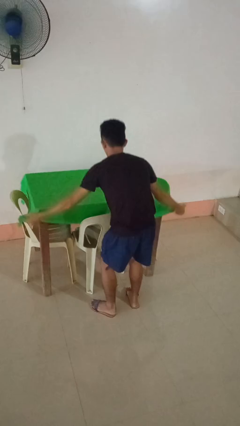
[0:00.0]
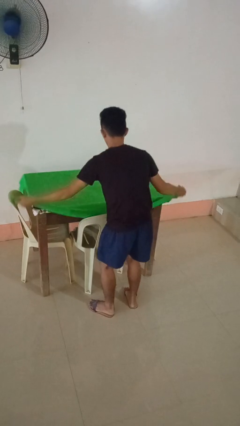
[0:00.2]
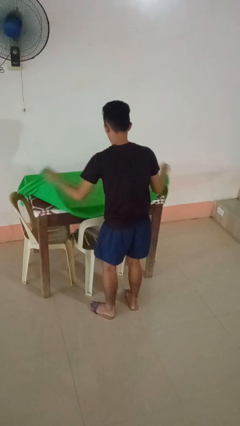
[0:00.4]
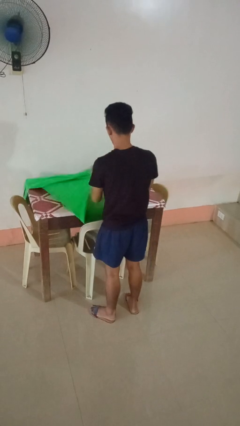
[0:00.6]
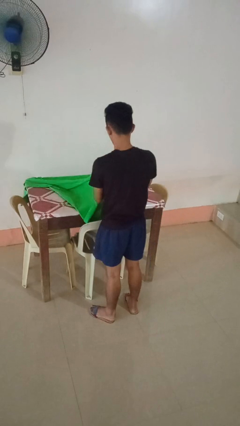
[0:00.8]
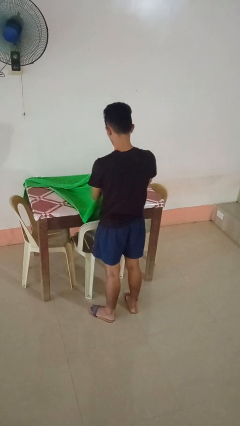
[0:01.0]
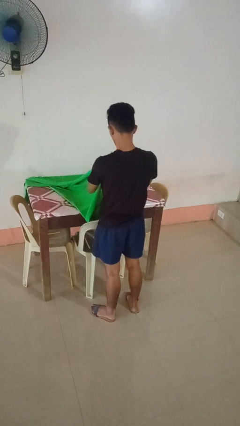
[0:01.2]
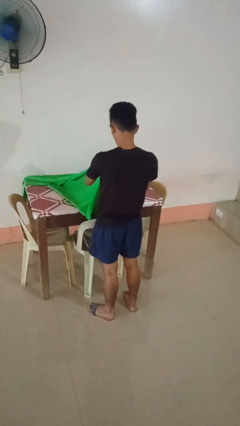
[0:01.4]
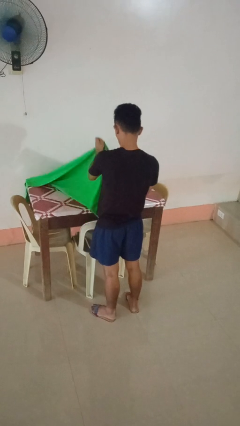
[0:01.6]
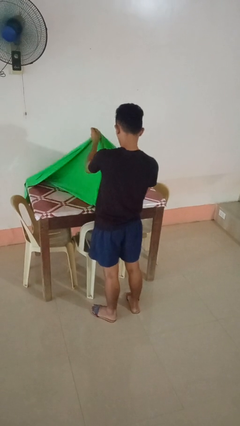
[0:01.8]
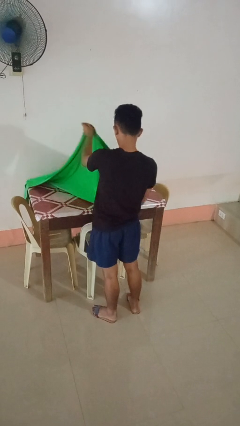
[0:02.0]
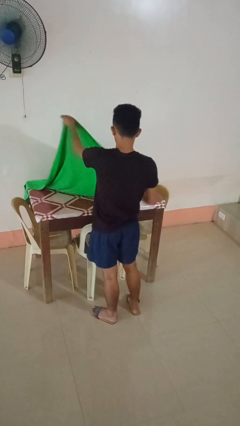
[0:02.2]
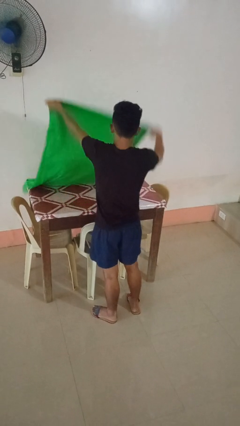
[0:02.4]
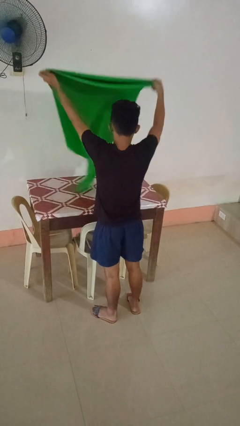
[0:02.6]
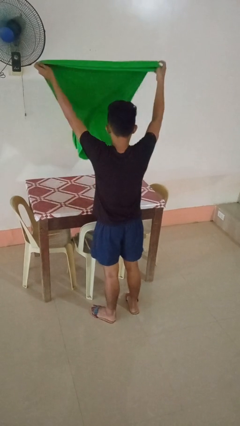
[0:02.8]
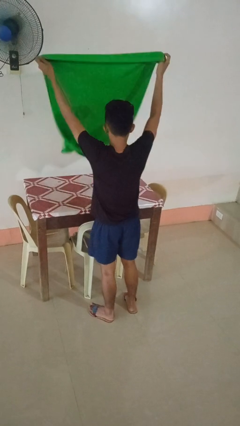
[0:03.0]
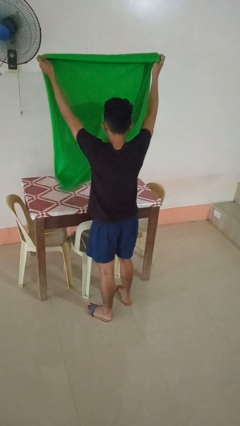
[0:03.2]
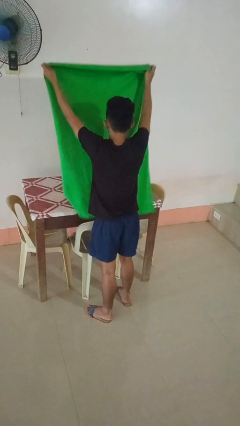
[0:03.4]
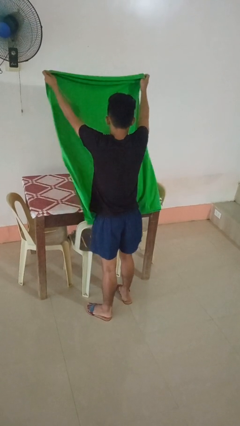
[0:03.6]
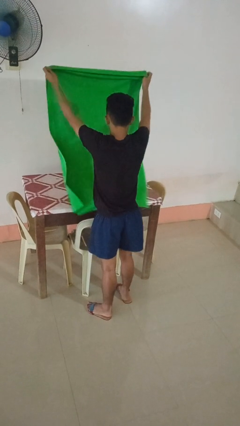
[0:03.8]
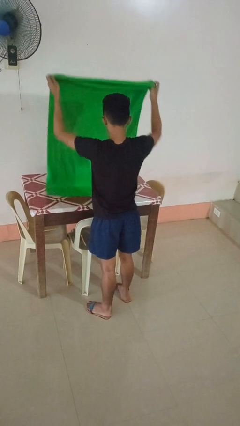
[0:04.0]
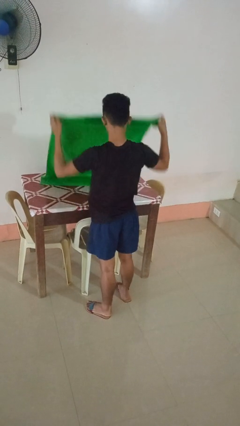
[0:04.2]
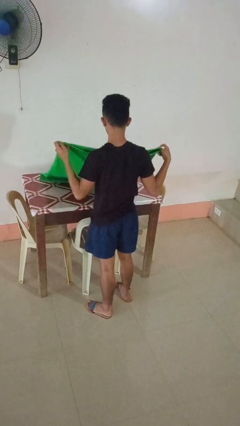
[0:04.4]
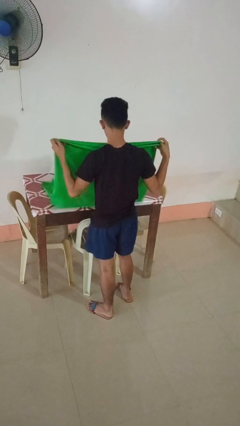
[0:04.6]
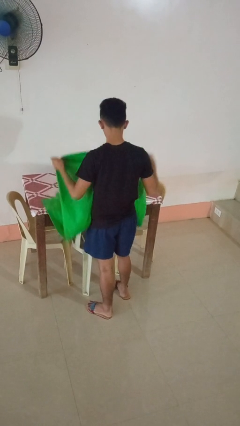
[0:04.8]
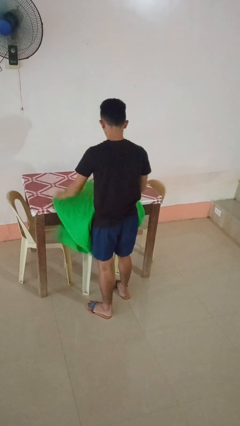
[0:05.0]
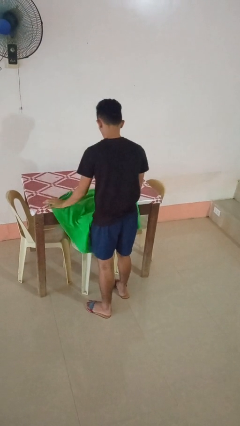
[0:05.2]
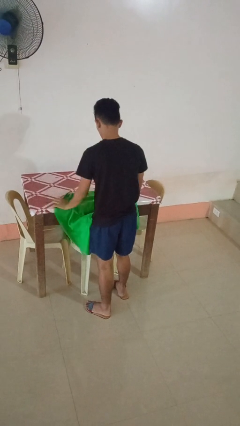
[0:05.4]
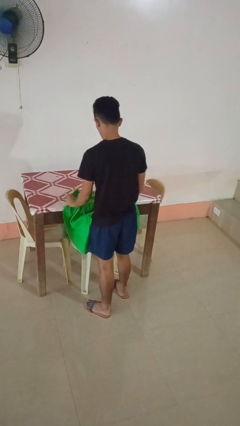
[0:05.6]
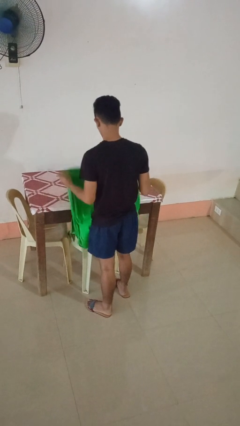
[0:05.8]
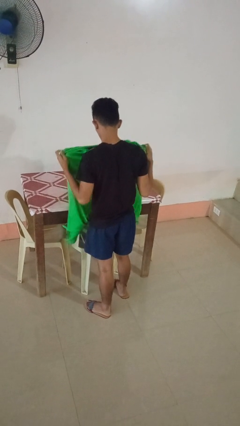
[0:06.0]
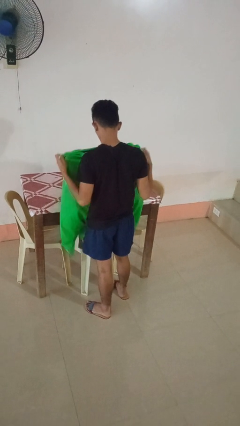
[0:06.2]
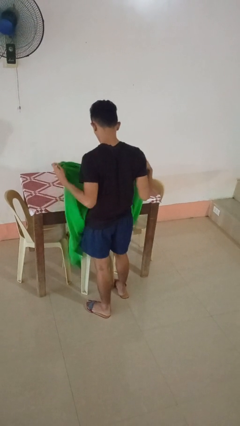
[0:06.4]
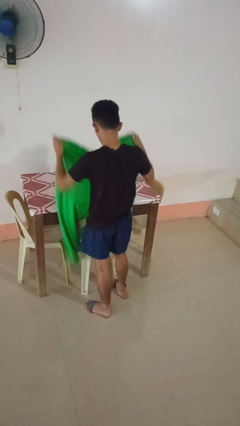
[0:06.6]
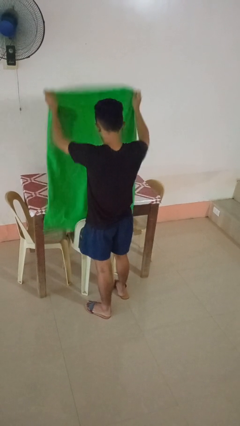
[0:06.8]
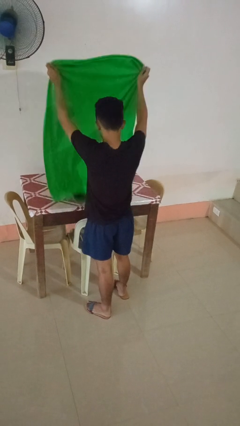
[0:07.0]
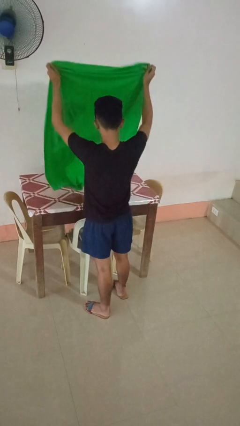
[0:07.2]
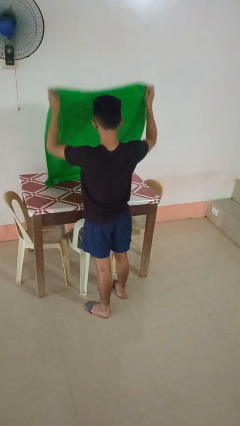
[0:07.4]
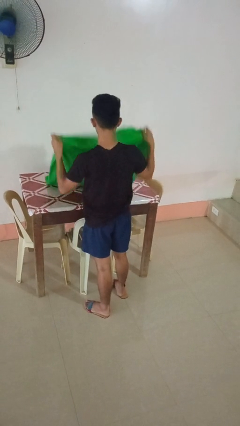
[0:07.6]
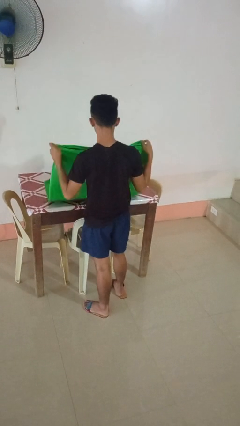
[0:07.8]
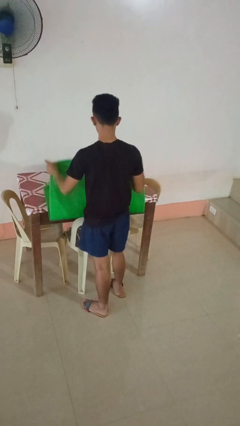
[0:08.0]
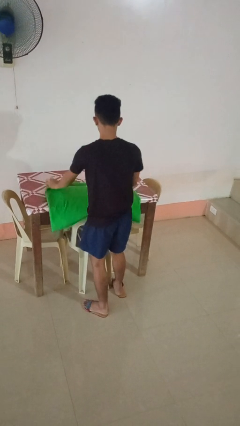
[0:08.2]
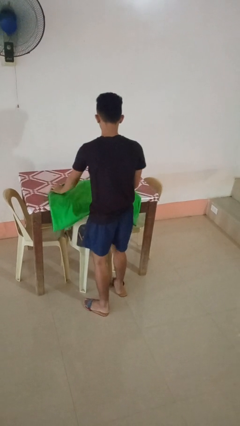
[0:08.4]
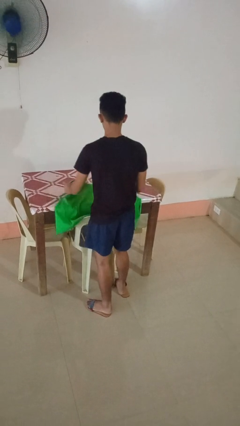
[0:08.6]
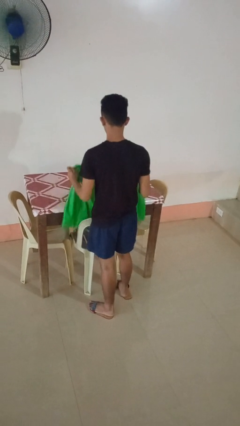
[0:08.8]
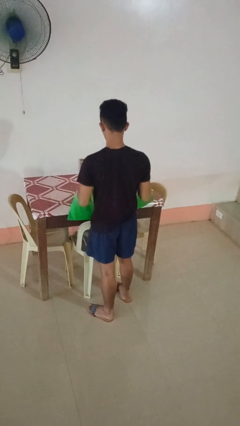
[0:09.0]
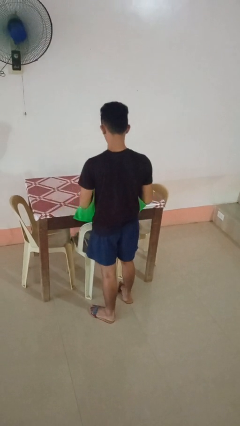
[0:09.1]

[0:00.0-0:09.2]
person folds tablecloth

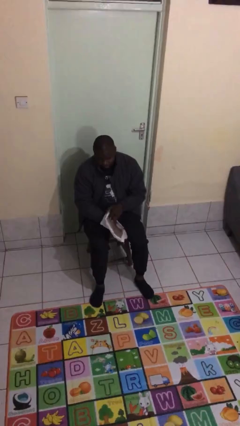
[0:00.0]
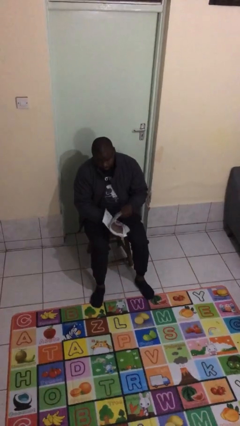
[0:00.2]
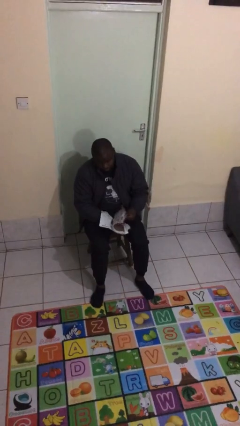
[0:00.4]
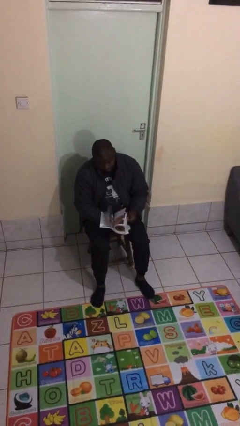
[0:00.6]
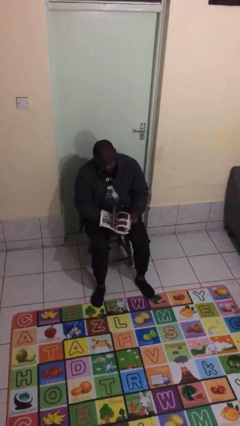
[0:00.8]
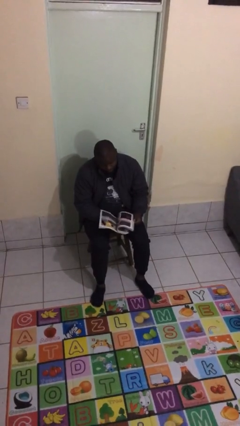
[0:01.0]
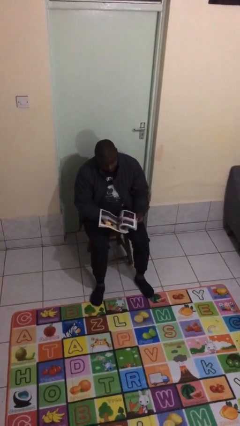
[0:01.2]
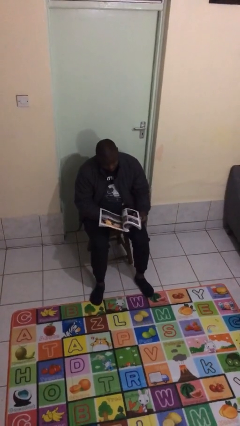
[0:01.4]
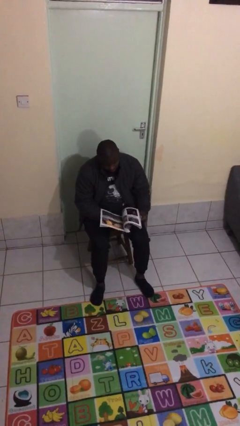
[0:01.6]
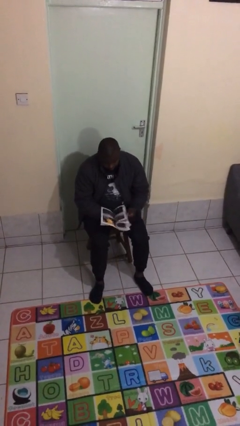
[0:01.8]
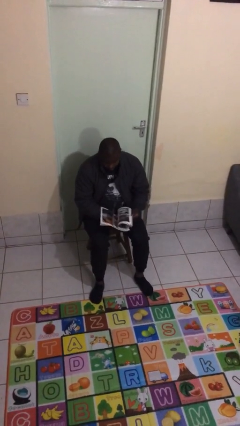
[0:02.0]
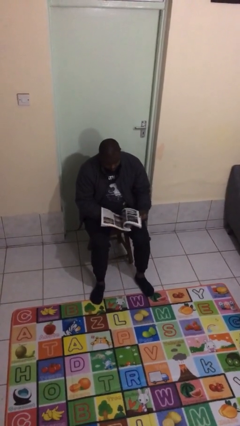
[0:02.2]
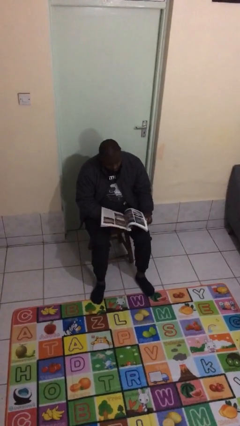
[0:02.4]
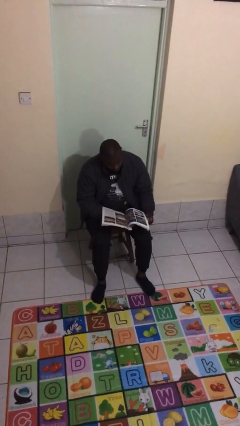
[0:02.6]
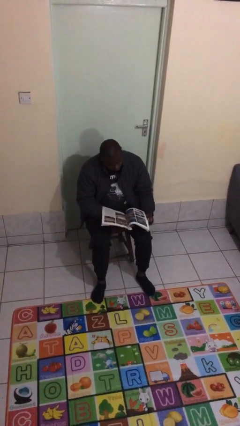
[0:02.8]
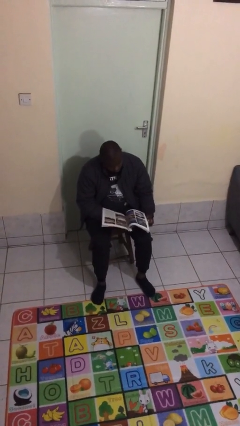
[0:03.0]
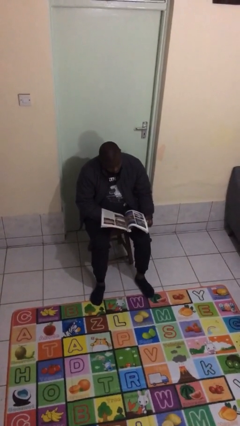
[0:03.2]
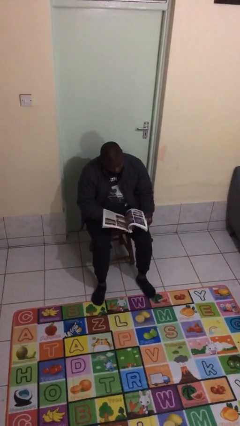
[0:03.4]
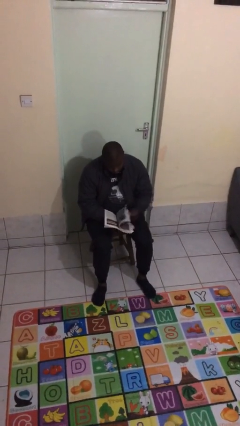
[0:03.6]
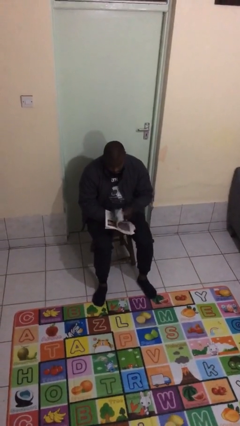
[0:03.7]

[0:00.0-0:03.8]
person reads magazine

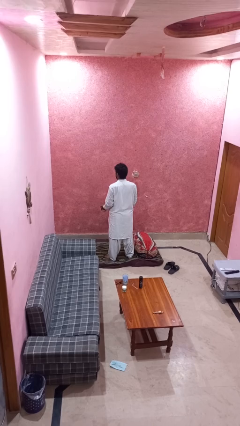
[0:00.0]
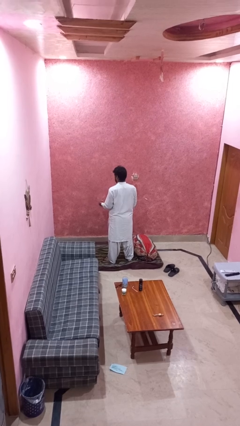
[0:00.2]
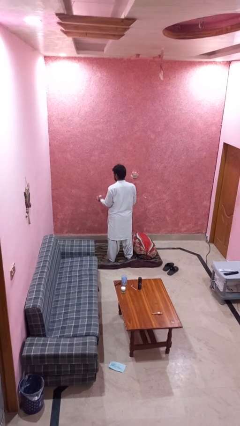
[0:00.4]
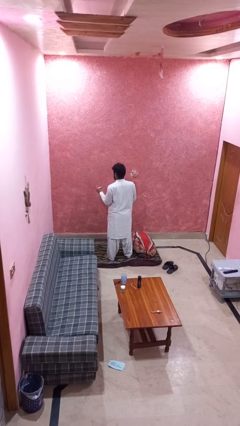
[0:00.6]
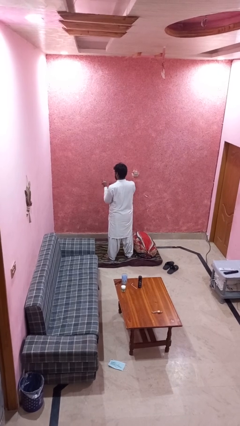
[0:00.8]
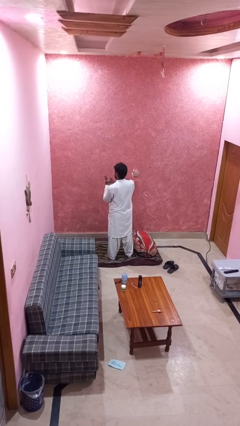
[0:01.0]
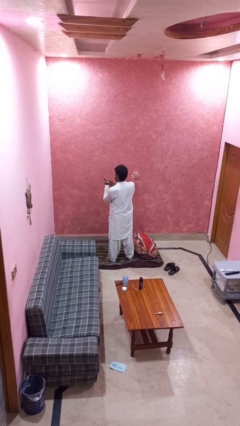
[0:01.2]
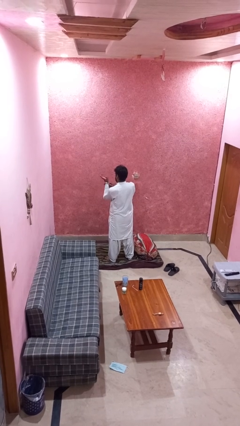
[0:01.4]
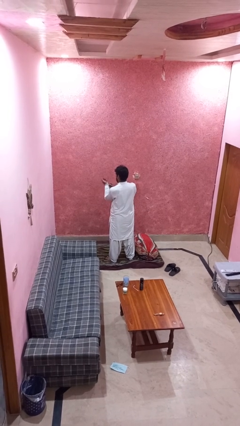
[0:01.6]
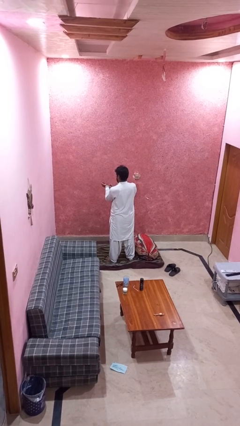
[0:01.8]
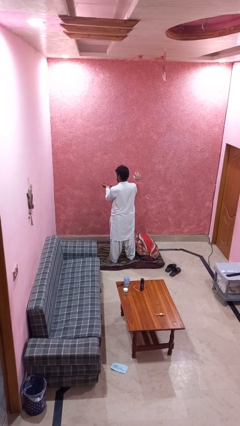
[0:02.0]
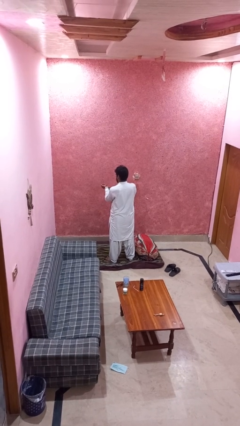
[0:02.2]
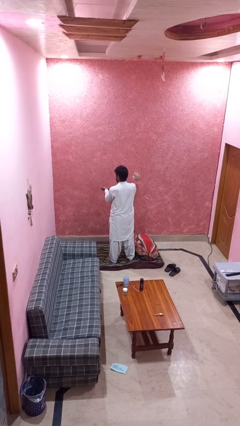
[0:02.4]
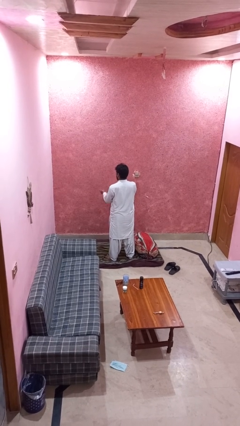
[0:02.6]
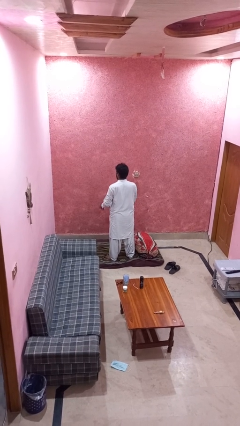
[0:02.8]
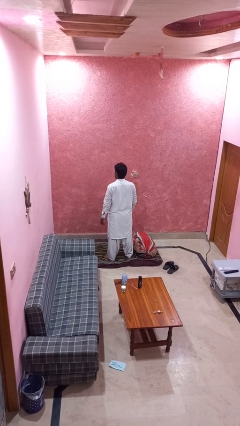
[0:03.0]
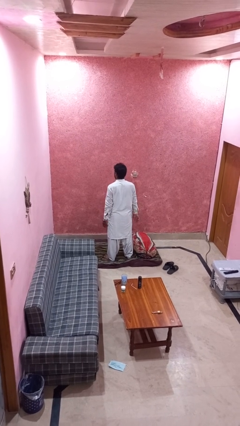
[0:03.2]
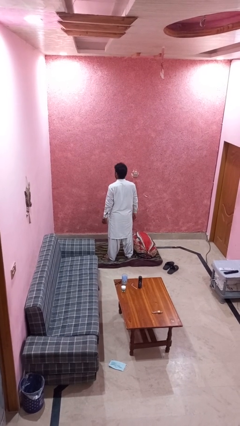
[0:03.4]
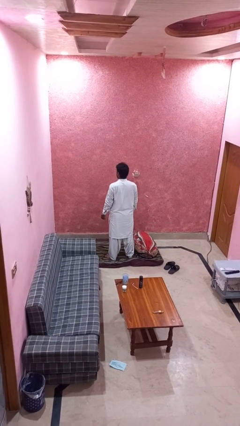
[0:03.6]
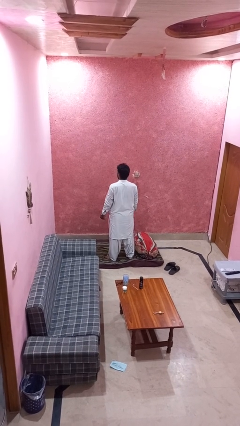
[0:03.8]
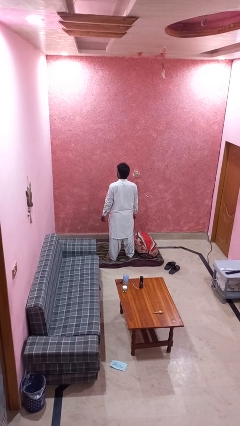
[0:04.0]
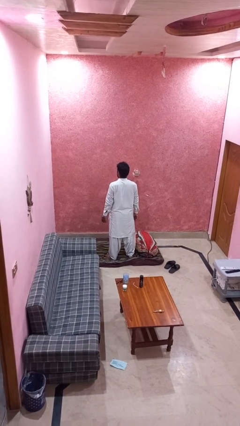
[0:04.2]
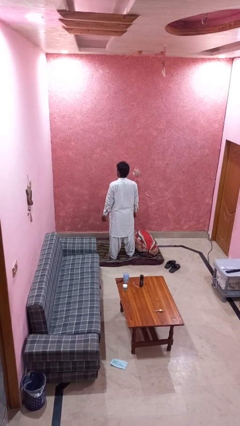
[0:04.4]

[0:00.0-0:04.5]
person puts on wristwatch

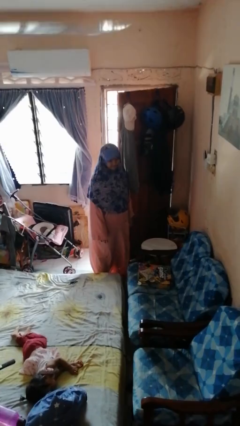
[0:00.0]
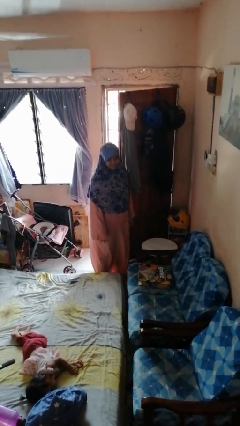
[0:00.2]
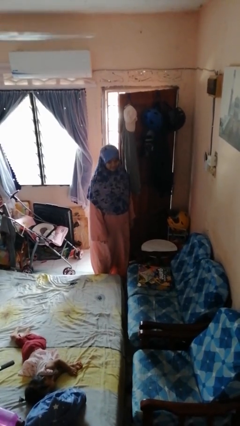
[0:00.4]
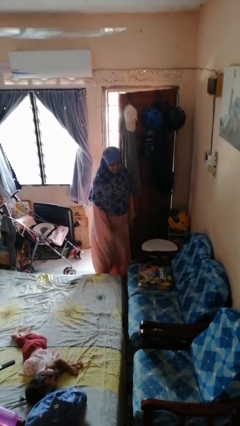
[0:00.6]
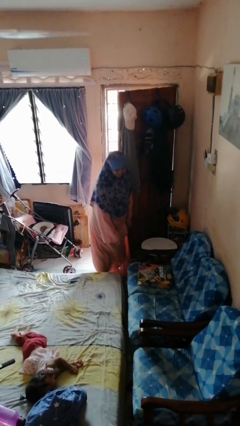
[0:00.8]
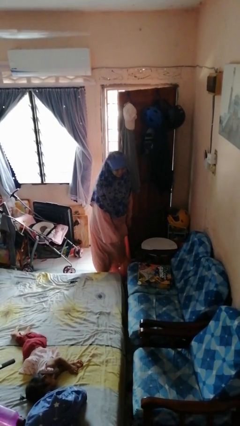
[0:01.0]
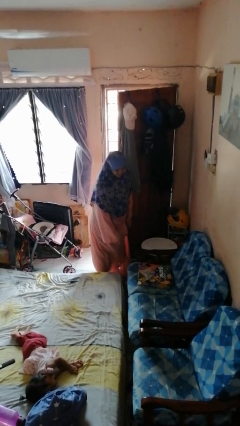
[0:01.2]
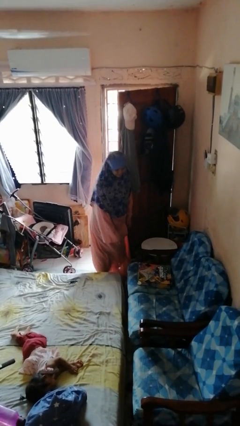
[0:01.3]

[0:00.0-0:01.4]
person picks up object from couch
